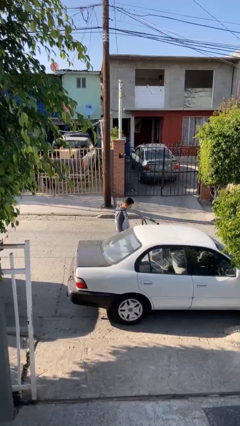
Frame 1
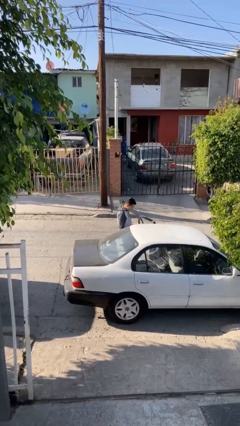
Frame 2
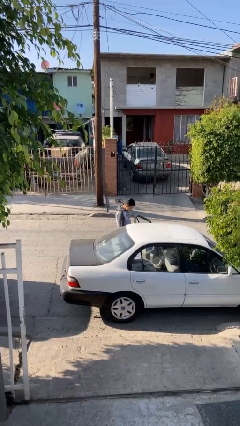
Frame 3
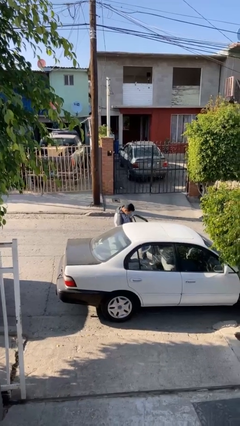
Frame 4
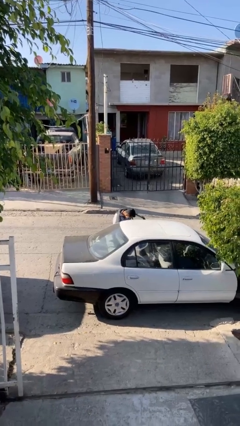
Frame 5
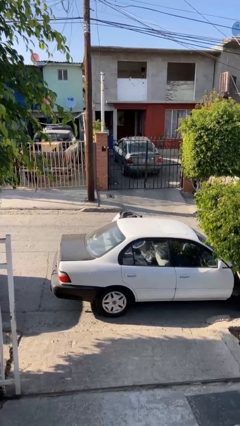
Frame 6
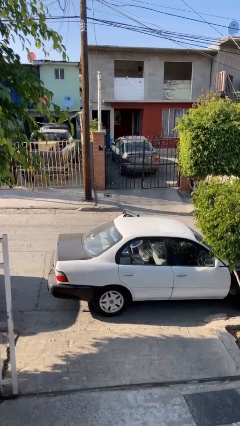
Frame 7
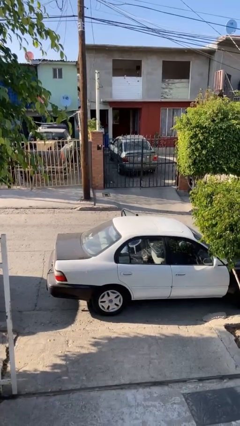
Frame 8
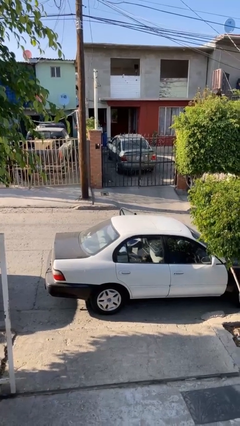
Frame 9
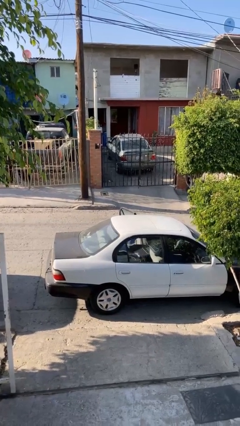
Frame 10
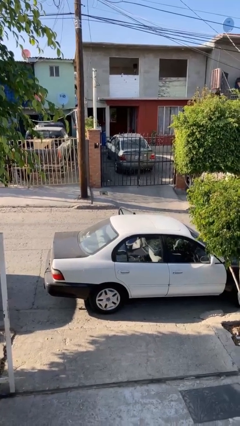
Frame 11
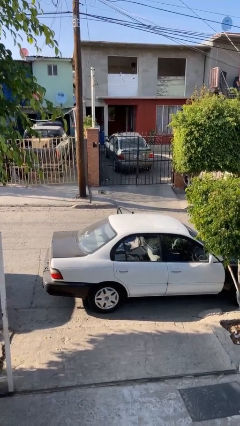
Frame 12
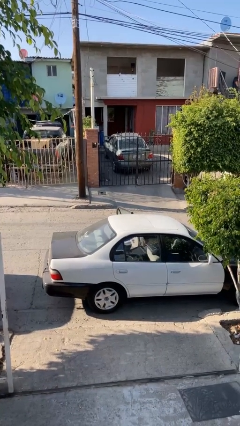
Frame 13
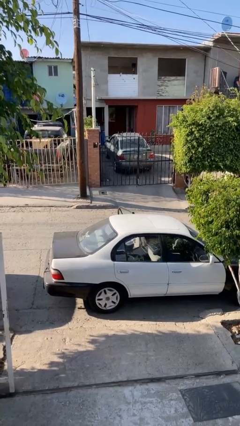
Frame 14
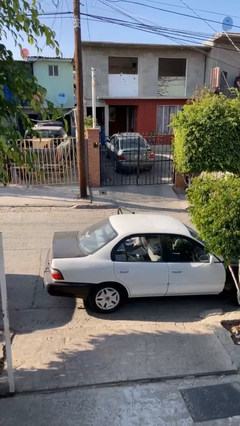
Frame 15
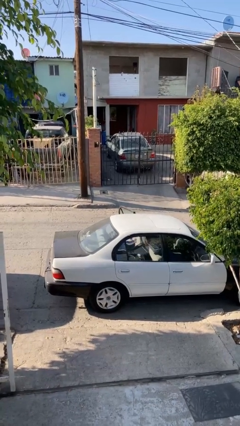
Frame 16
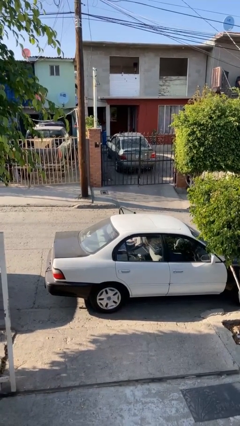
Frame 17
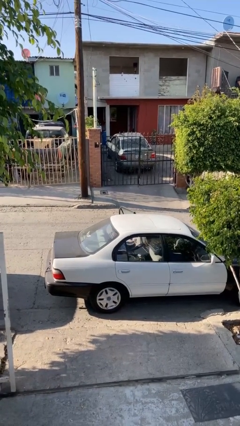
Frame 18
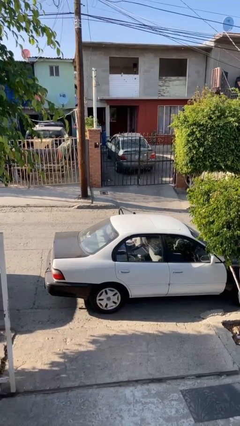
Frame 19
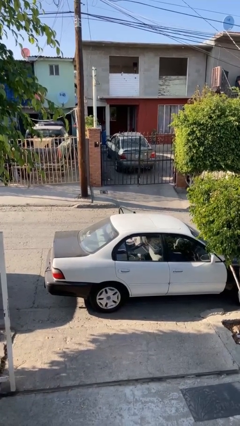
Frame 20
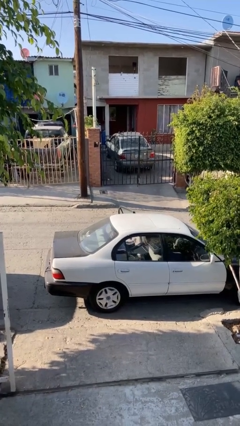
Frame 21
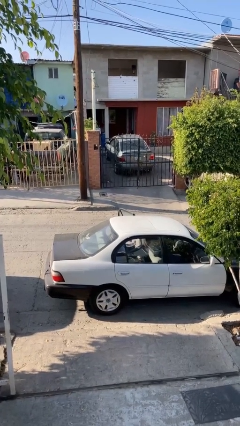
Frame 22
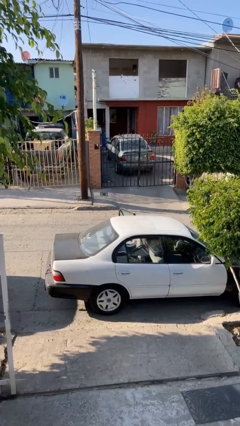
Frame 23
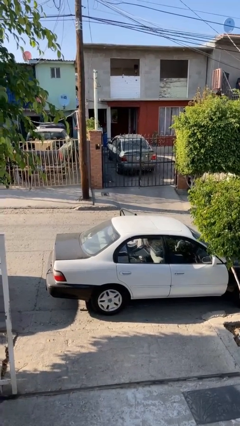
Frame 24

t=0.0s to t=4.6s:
person enters car

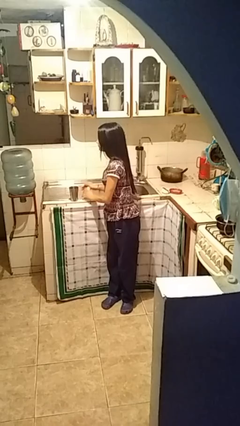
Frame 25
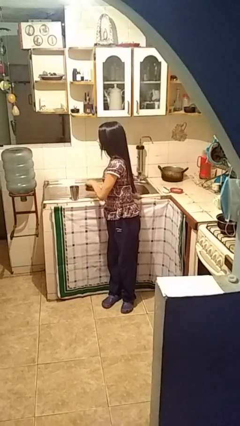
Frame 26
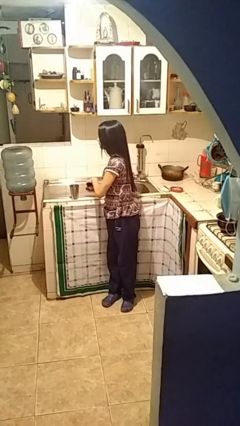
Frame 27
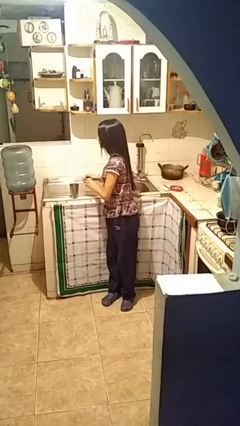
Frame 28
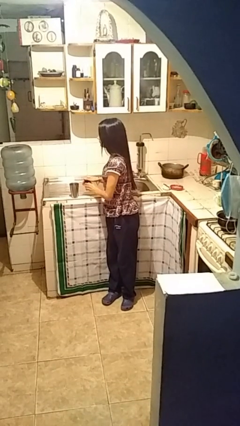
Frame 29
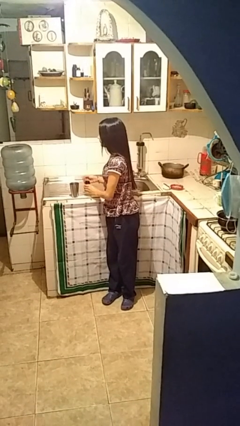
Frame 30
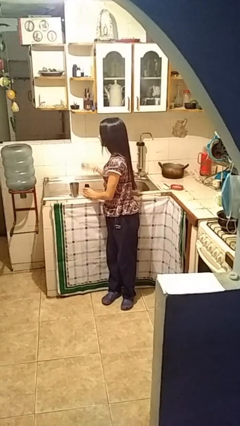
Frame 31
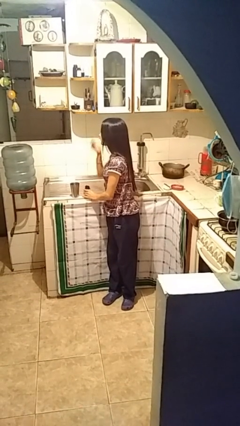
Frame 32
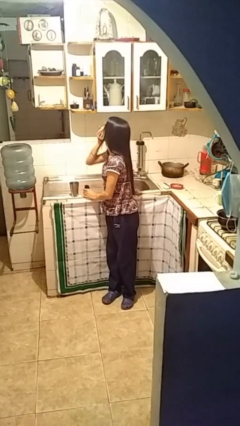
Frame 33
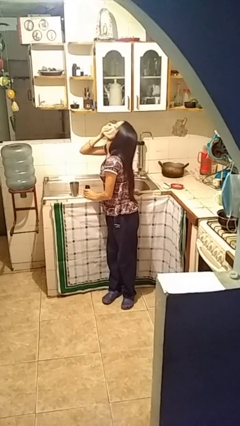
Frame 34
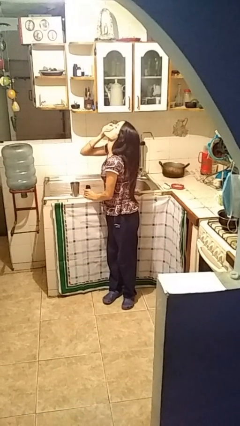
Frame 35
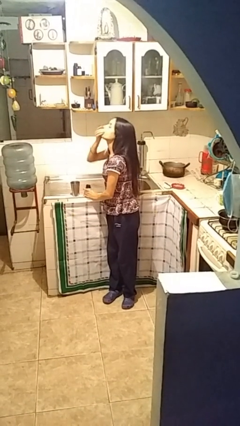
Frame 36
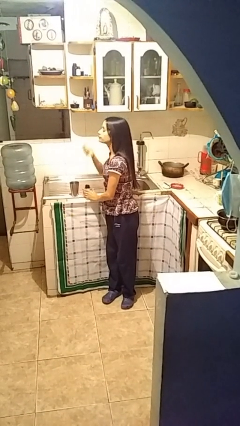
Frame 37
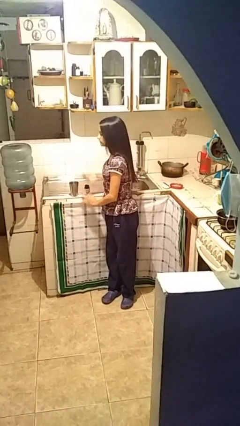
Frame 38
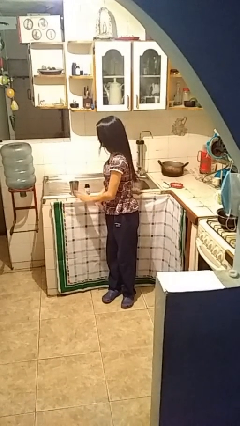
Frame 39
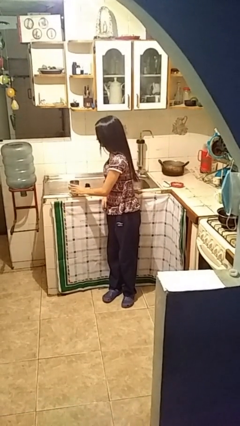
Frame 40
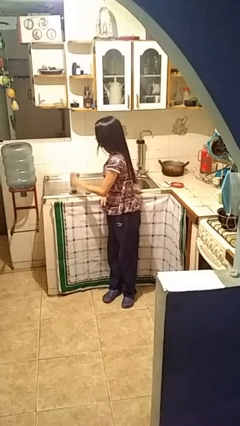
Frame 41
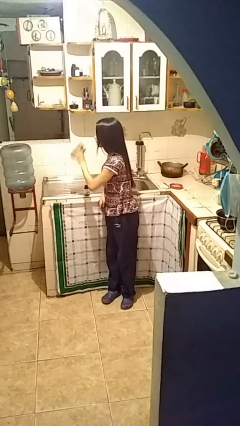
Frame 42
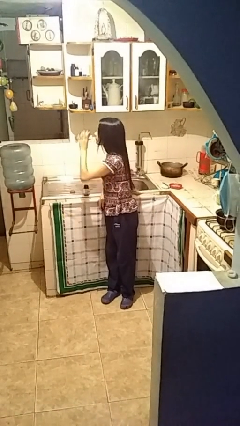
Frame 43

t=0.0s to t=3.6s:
person takes medicine pills

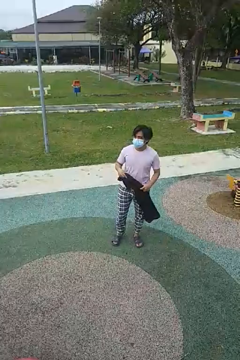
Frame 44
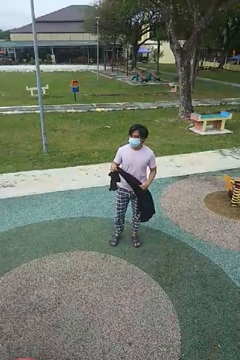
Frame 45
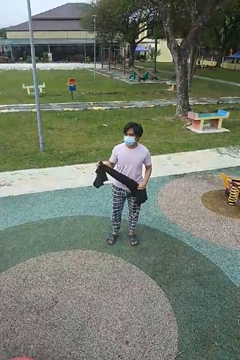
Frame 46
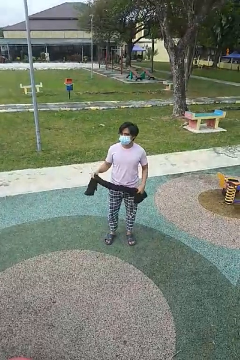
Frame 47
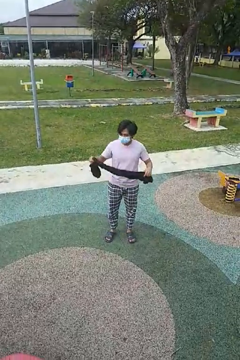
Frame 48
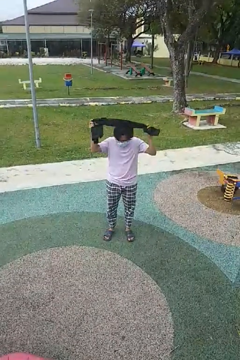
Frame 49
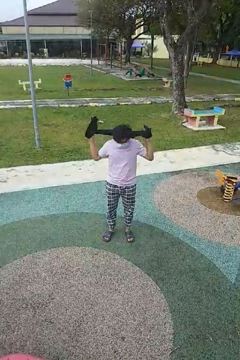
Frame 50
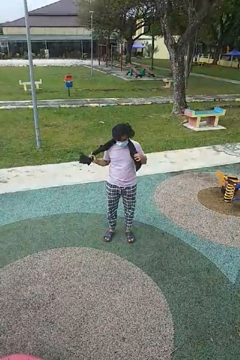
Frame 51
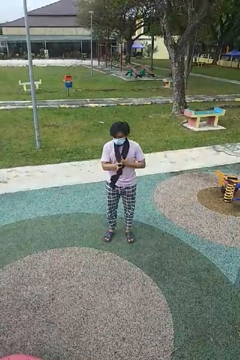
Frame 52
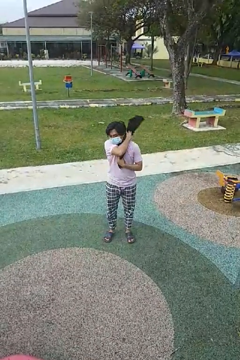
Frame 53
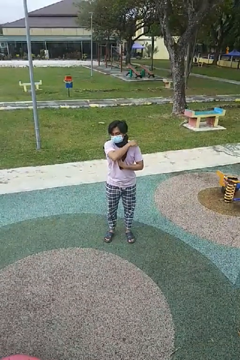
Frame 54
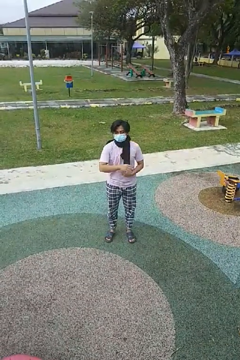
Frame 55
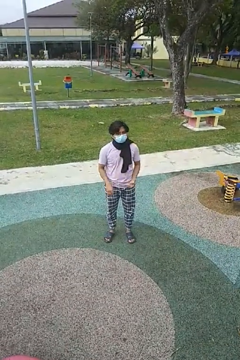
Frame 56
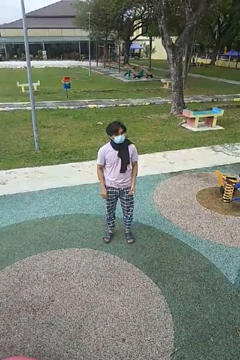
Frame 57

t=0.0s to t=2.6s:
person puts on scarf

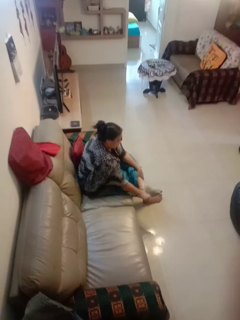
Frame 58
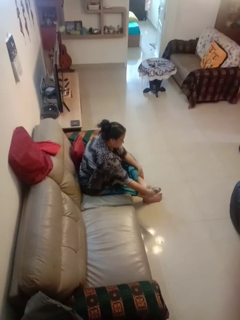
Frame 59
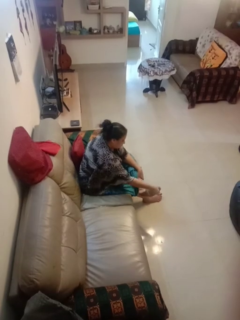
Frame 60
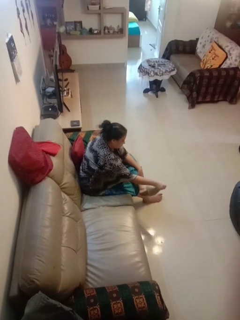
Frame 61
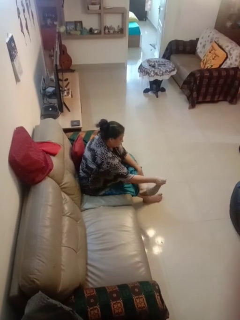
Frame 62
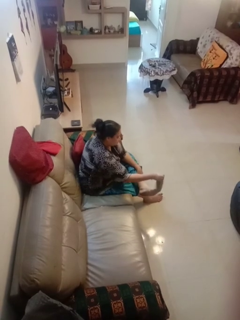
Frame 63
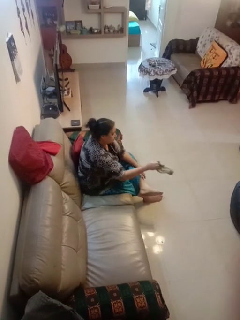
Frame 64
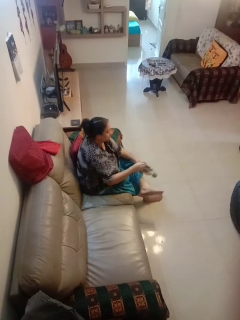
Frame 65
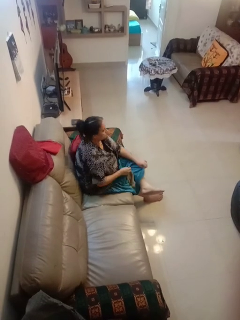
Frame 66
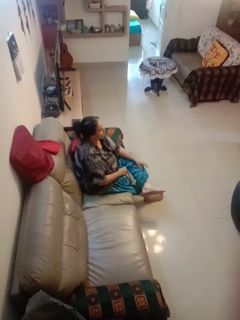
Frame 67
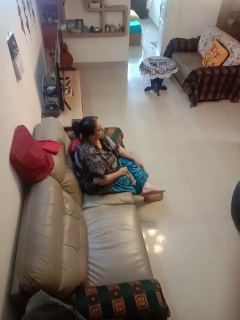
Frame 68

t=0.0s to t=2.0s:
person takes off socks

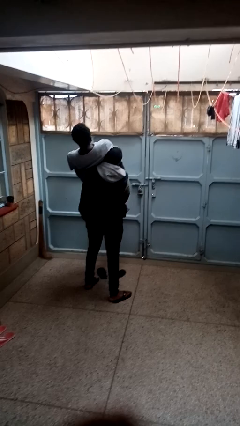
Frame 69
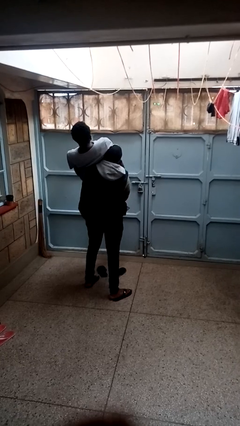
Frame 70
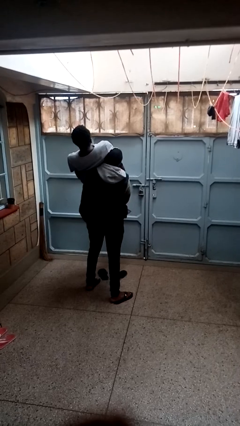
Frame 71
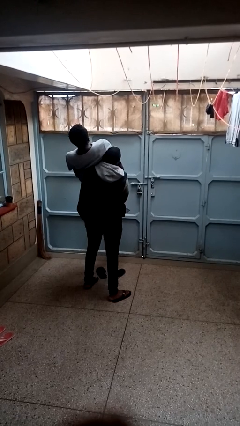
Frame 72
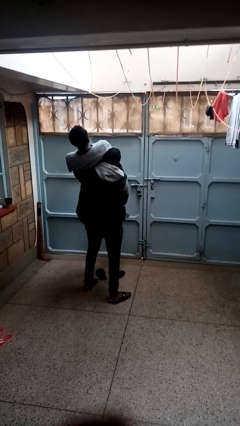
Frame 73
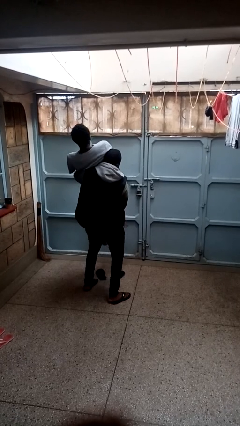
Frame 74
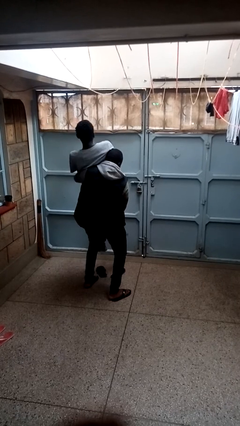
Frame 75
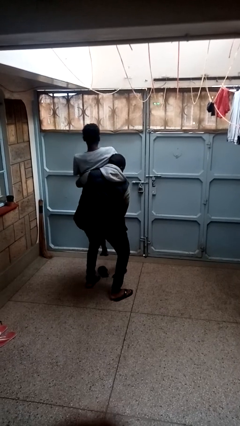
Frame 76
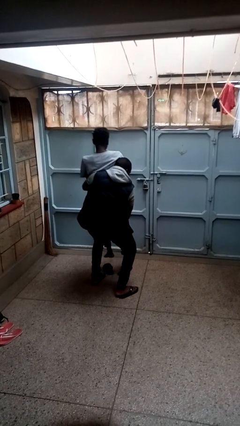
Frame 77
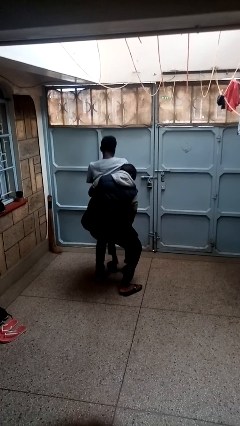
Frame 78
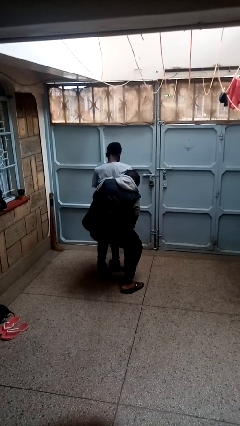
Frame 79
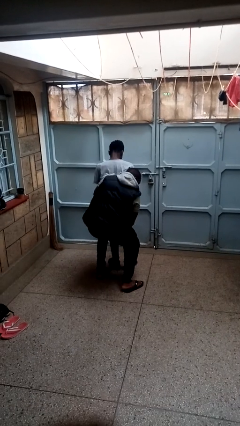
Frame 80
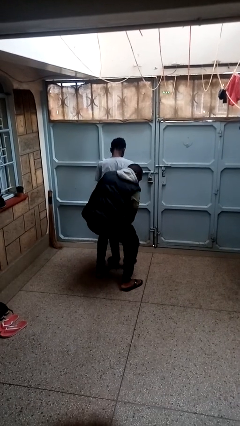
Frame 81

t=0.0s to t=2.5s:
person puts down person

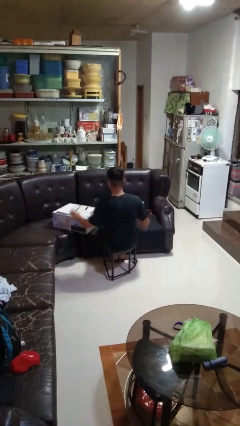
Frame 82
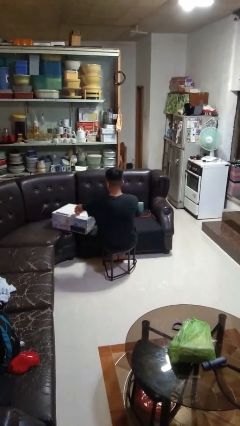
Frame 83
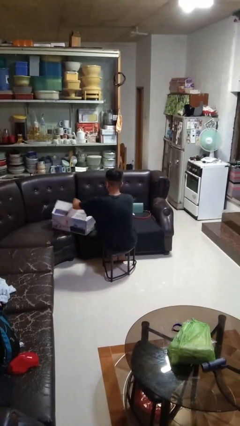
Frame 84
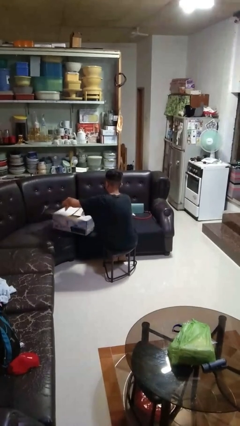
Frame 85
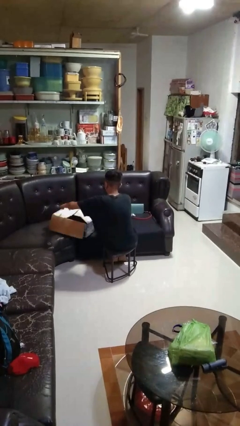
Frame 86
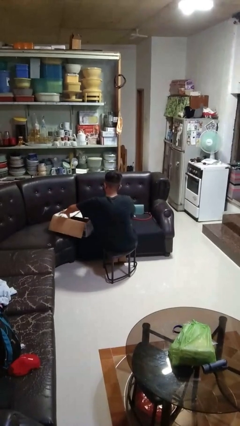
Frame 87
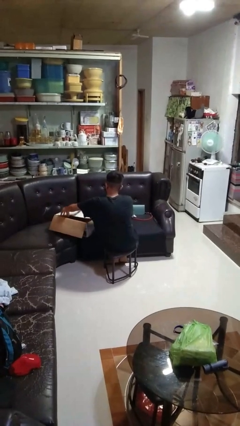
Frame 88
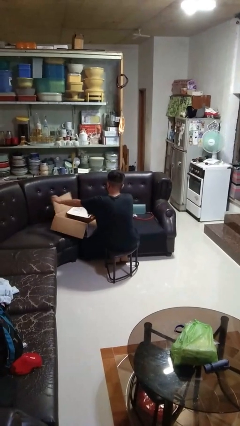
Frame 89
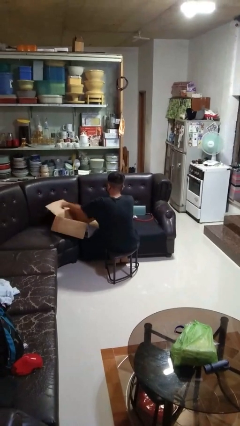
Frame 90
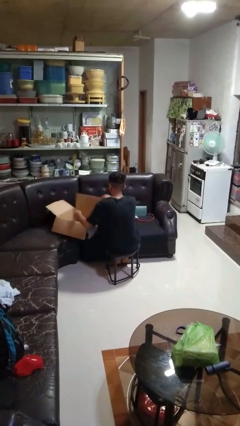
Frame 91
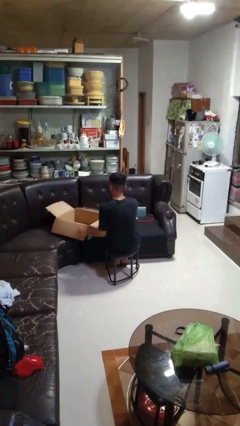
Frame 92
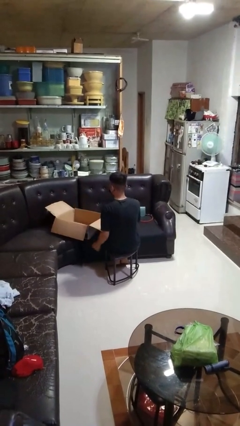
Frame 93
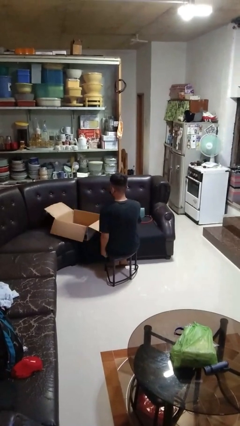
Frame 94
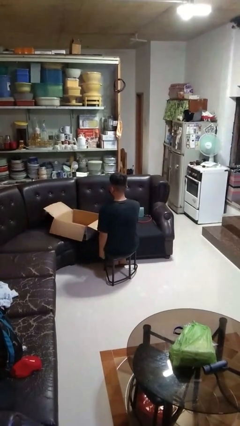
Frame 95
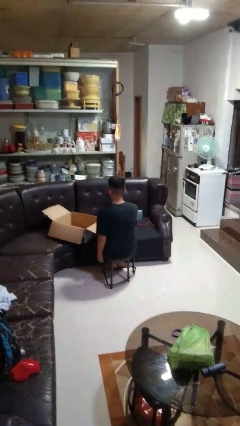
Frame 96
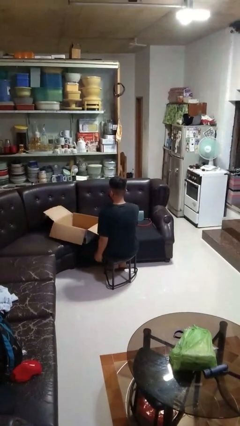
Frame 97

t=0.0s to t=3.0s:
person opens box

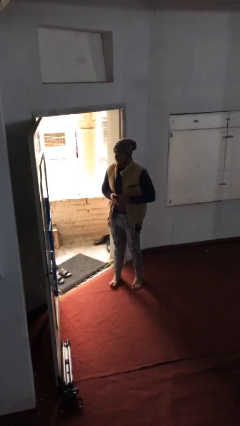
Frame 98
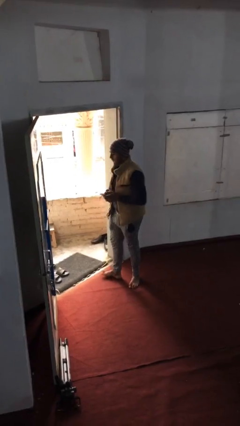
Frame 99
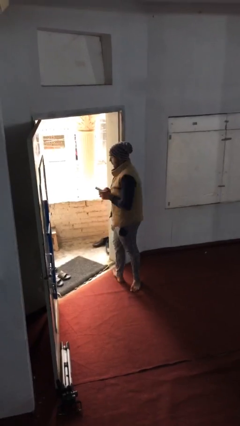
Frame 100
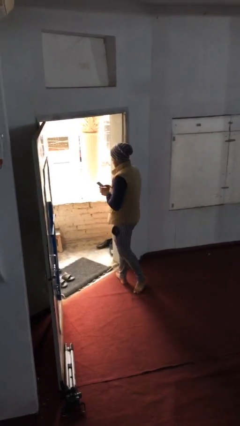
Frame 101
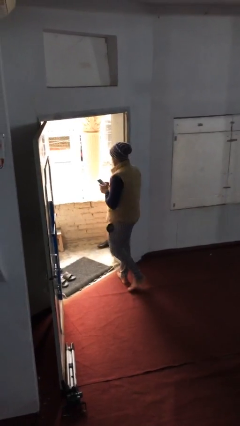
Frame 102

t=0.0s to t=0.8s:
person exits scene through structure
